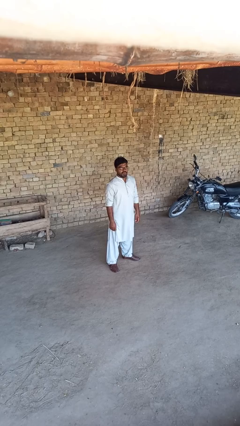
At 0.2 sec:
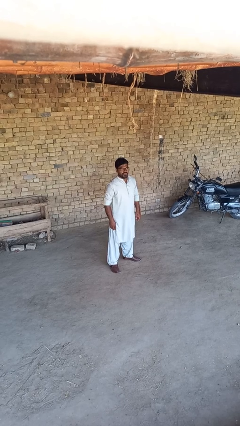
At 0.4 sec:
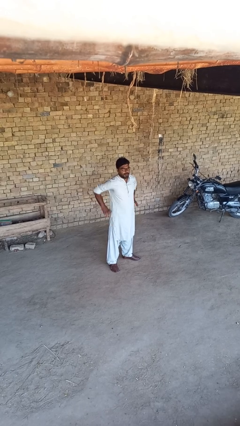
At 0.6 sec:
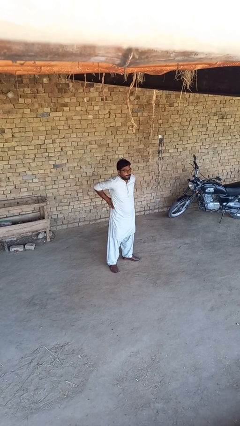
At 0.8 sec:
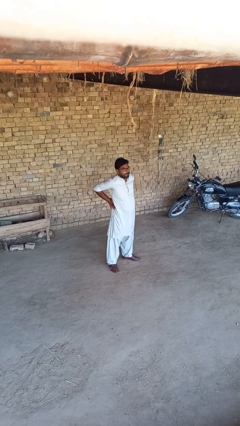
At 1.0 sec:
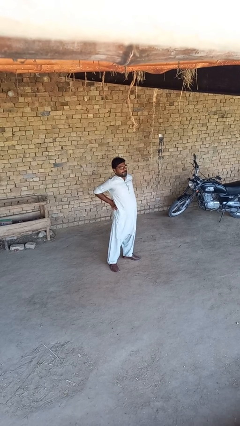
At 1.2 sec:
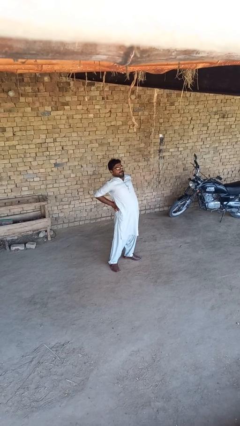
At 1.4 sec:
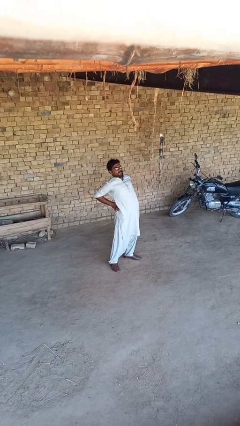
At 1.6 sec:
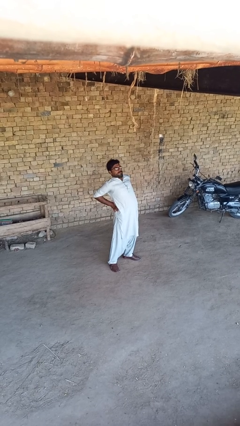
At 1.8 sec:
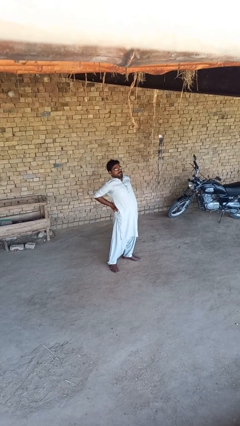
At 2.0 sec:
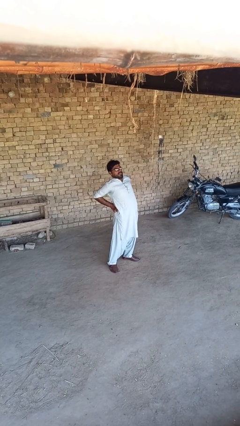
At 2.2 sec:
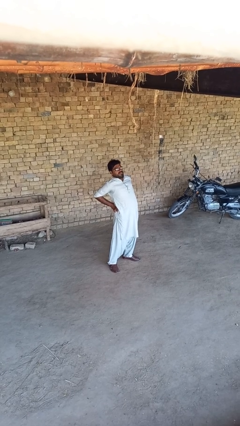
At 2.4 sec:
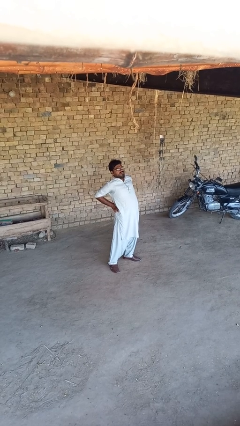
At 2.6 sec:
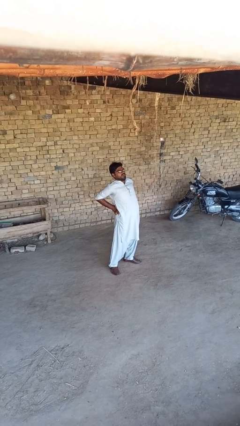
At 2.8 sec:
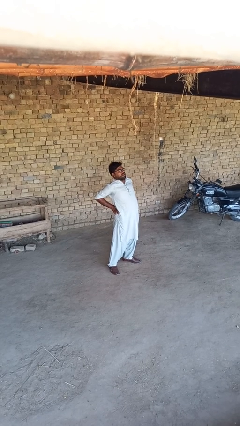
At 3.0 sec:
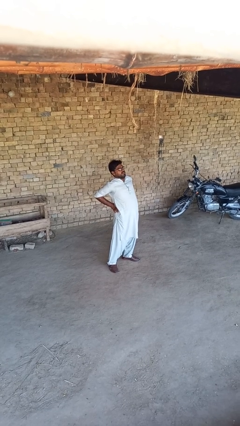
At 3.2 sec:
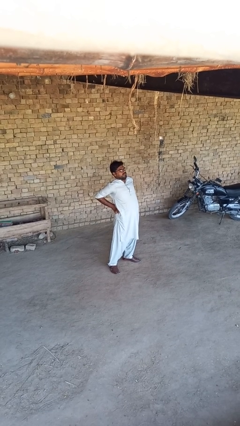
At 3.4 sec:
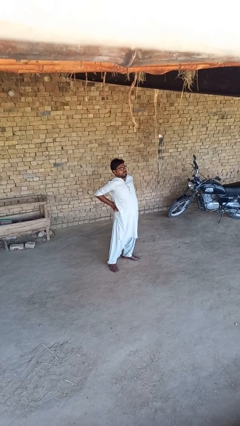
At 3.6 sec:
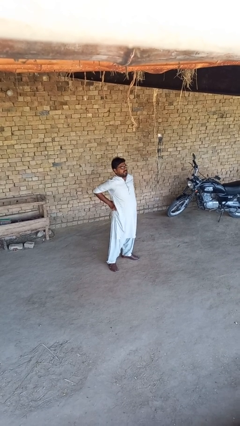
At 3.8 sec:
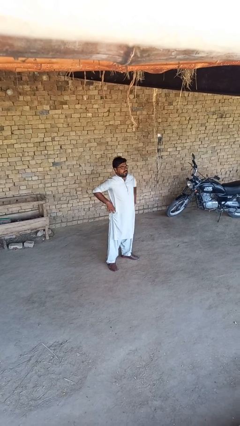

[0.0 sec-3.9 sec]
person stretches back

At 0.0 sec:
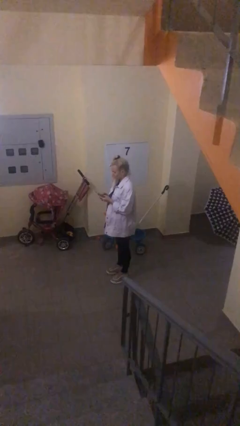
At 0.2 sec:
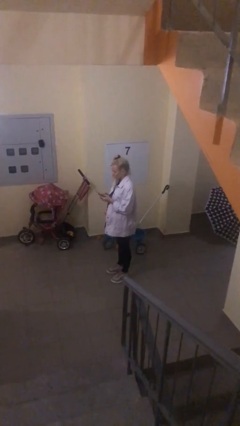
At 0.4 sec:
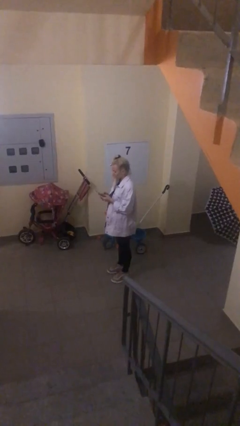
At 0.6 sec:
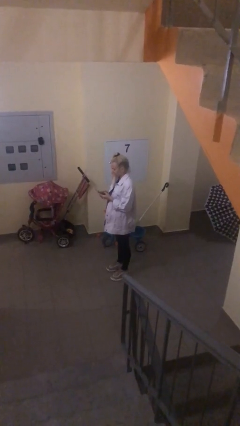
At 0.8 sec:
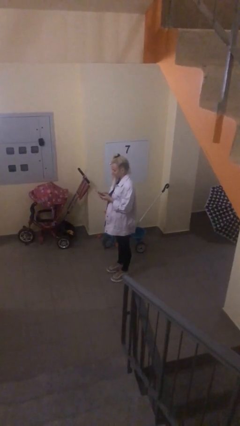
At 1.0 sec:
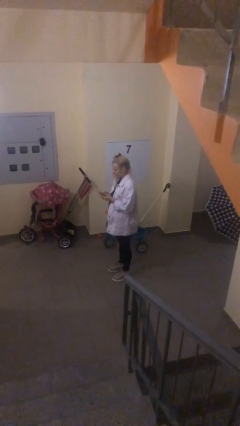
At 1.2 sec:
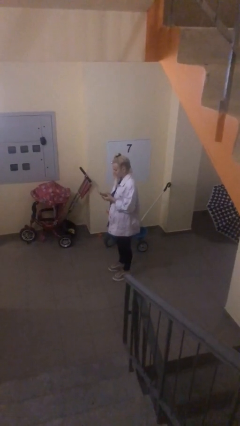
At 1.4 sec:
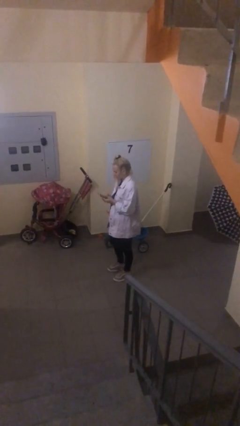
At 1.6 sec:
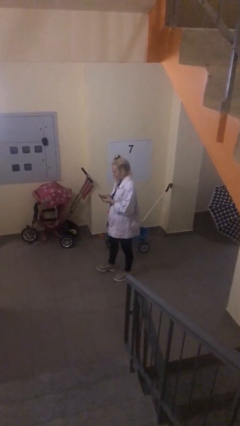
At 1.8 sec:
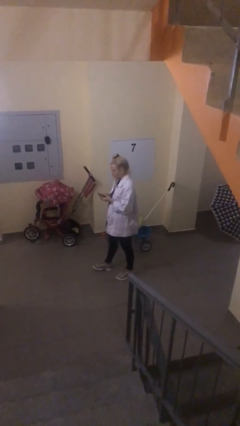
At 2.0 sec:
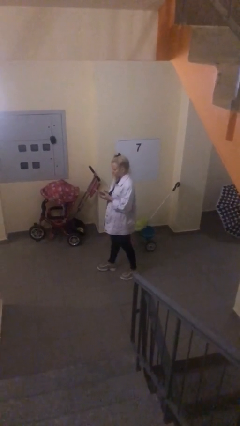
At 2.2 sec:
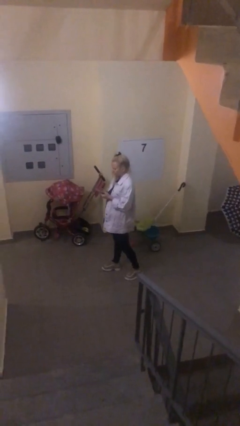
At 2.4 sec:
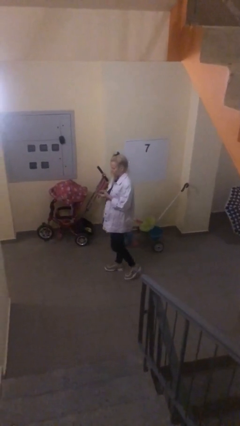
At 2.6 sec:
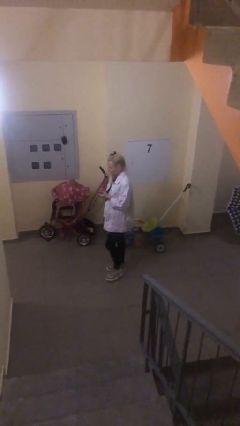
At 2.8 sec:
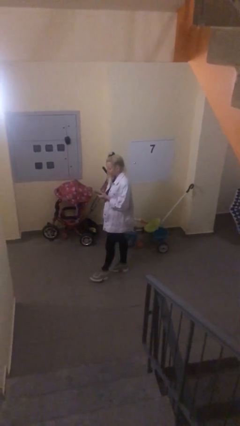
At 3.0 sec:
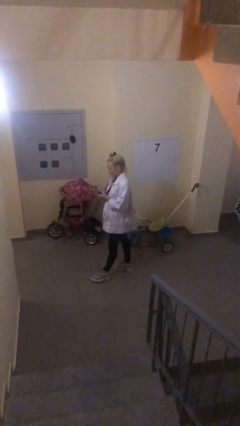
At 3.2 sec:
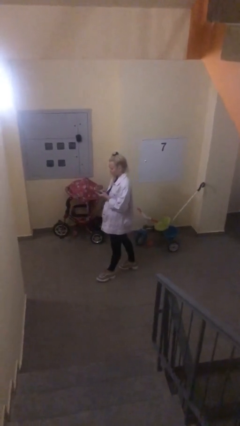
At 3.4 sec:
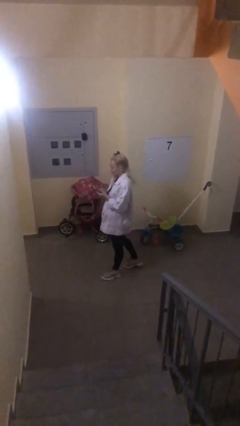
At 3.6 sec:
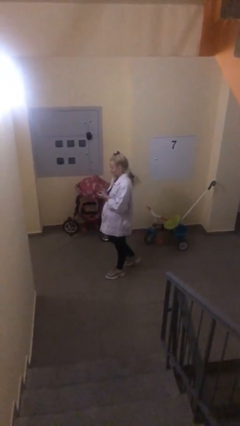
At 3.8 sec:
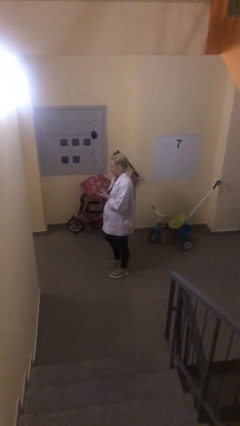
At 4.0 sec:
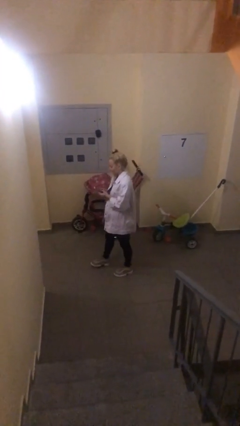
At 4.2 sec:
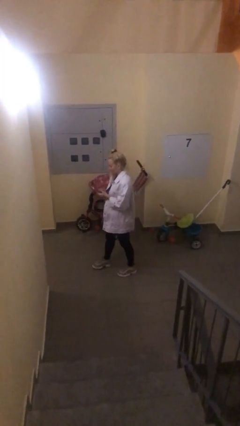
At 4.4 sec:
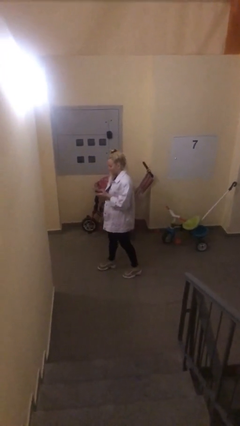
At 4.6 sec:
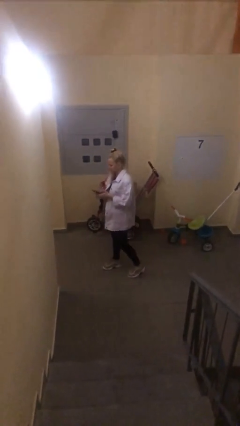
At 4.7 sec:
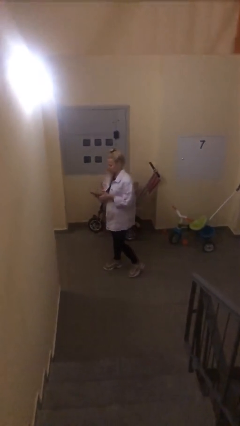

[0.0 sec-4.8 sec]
person texts on phone

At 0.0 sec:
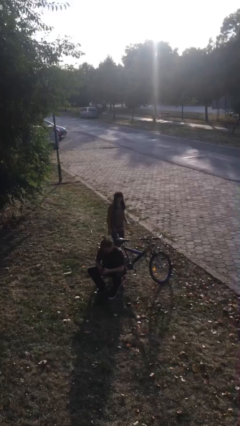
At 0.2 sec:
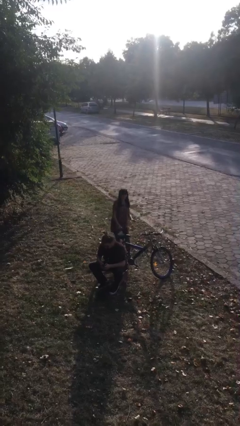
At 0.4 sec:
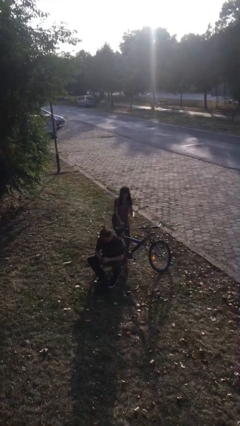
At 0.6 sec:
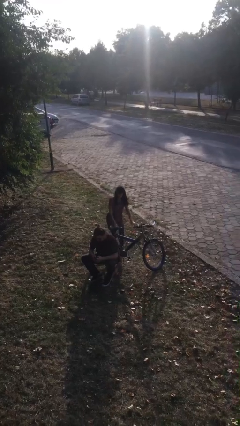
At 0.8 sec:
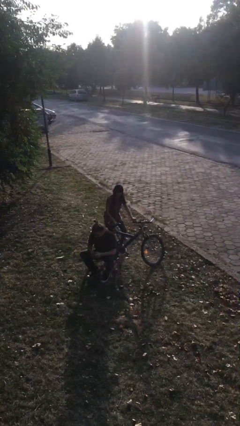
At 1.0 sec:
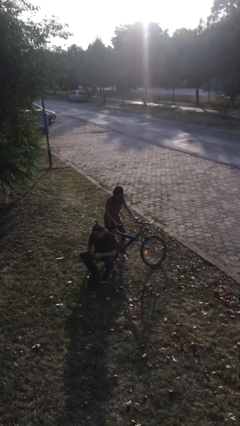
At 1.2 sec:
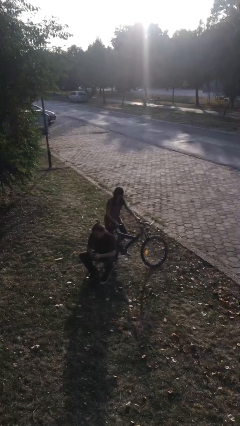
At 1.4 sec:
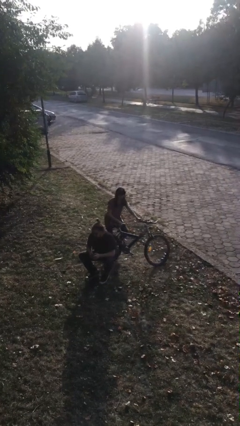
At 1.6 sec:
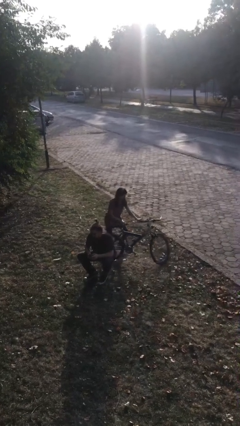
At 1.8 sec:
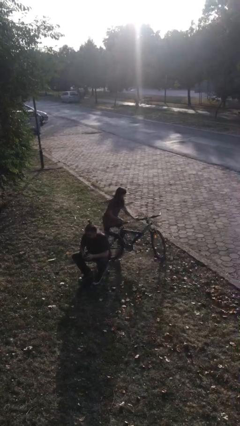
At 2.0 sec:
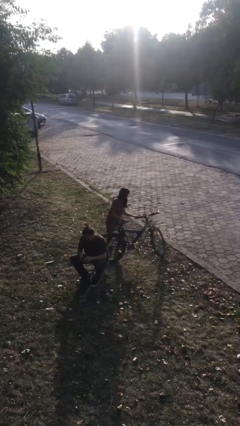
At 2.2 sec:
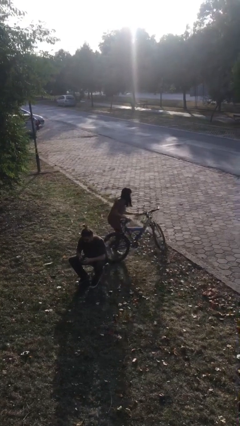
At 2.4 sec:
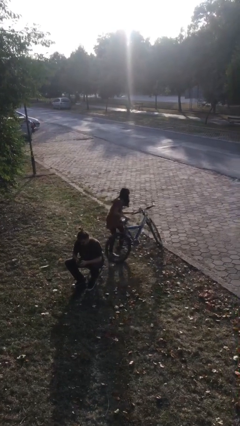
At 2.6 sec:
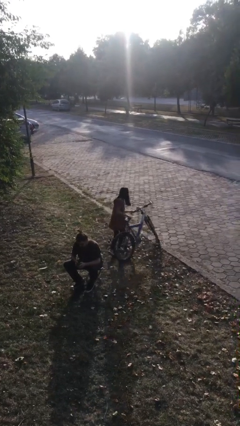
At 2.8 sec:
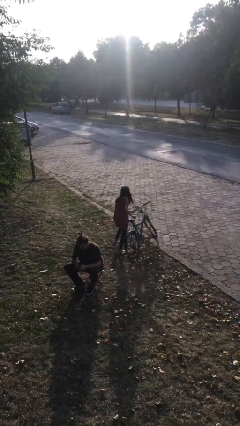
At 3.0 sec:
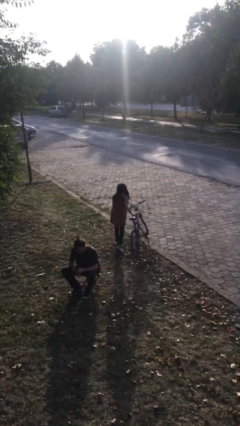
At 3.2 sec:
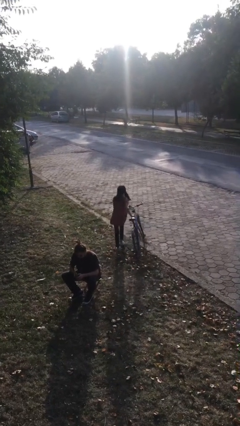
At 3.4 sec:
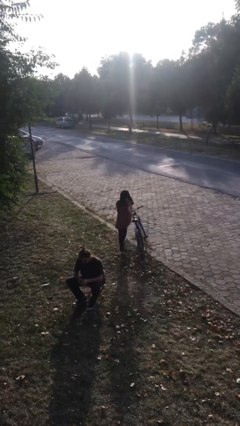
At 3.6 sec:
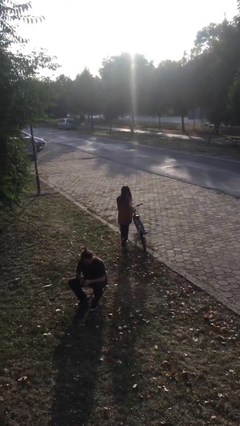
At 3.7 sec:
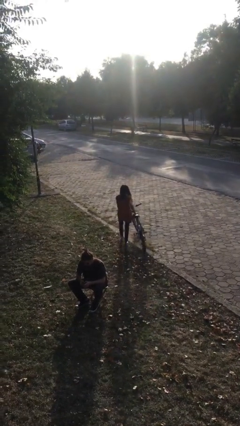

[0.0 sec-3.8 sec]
person steals object from person

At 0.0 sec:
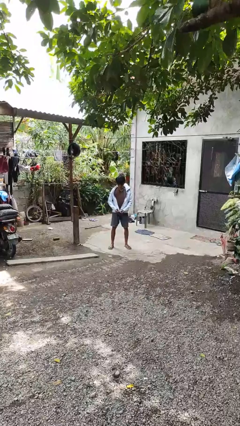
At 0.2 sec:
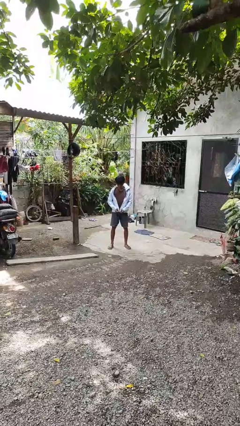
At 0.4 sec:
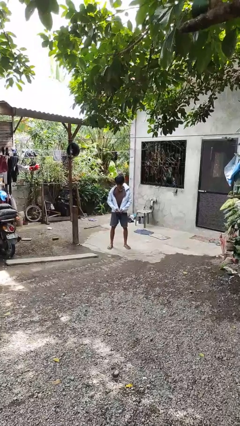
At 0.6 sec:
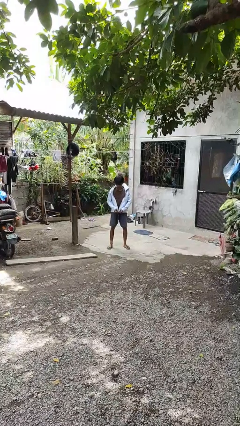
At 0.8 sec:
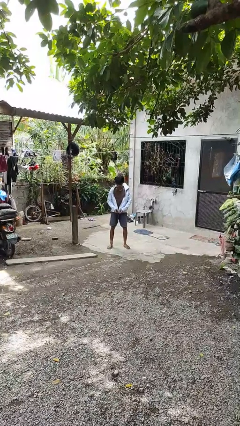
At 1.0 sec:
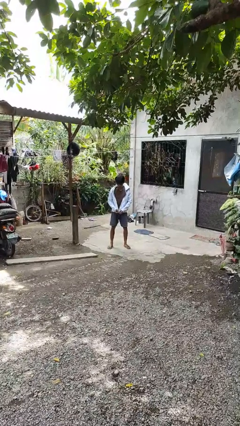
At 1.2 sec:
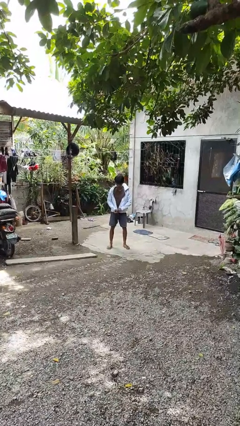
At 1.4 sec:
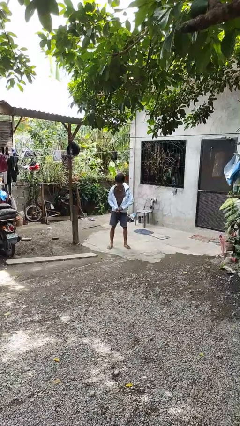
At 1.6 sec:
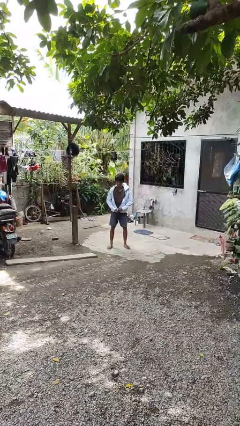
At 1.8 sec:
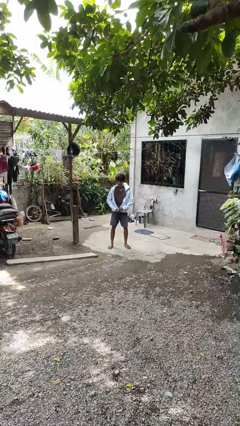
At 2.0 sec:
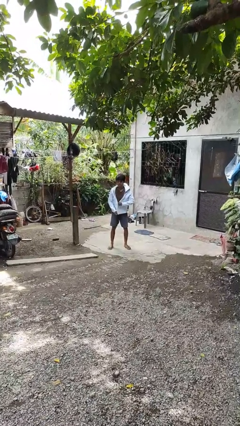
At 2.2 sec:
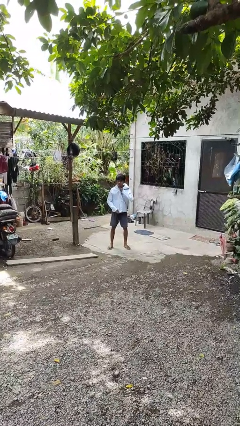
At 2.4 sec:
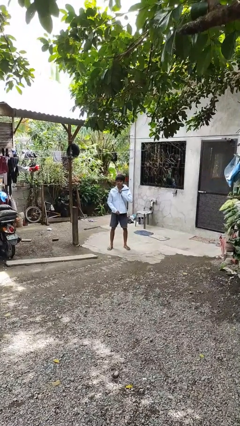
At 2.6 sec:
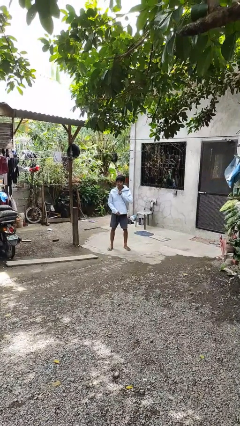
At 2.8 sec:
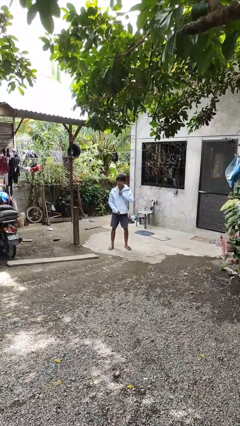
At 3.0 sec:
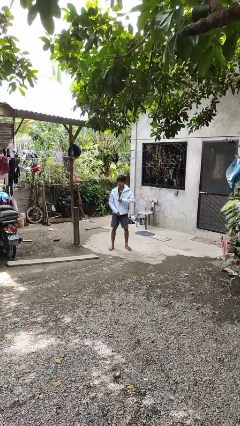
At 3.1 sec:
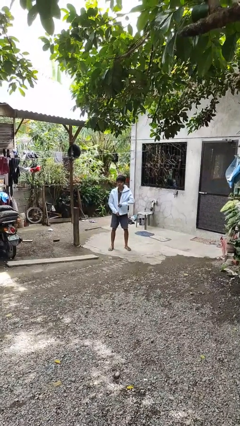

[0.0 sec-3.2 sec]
person zips up jacket

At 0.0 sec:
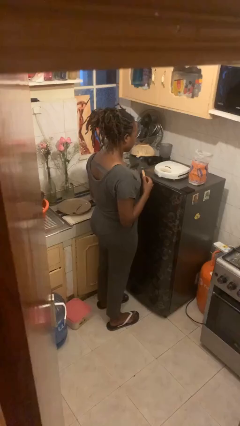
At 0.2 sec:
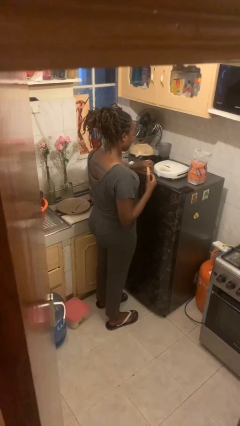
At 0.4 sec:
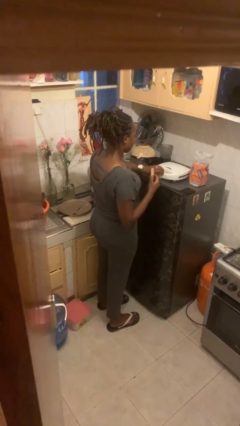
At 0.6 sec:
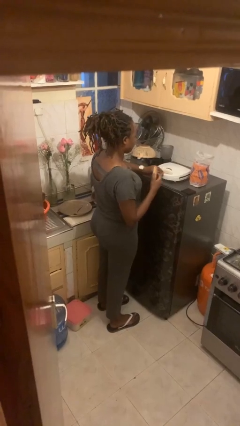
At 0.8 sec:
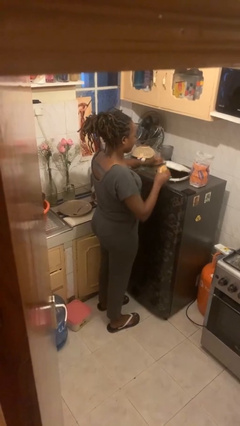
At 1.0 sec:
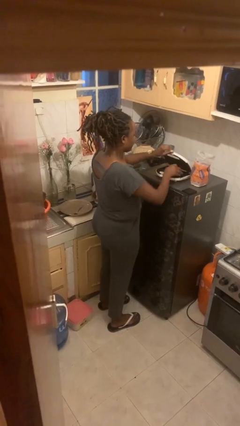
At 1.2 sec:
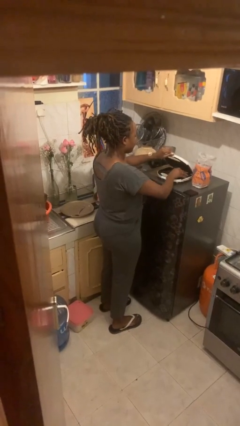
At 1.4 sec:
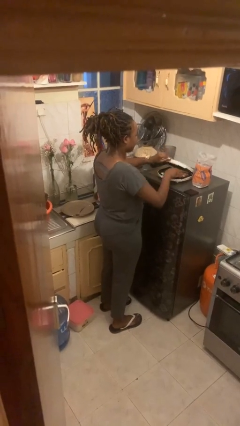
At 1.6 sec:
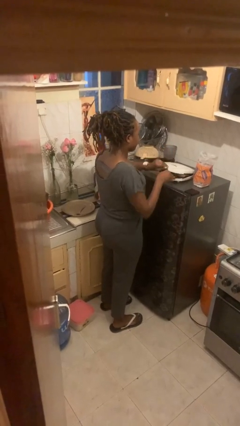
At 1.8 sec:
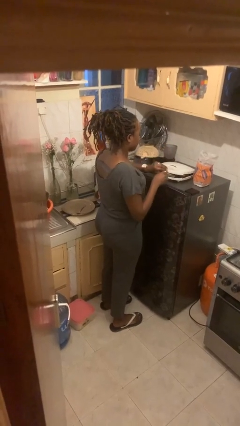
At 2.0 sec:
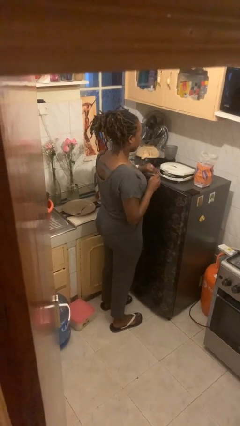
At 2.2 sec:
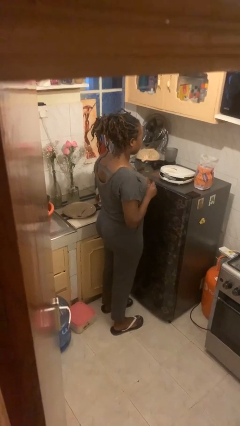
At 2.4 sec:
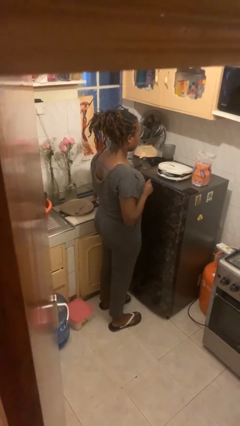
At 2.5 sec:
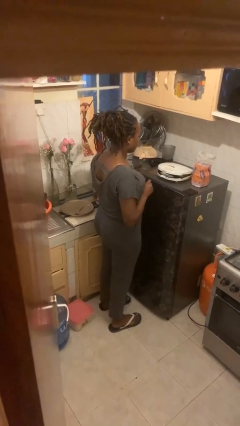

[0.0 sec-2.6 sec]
person puts object into toaster
